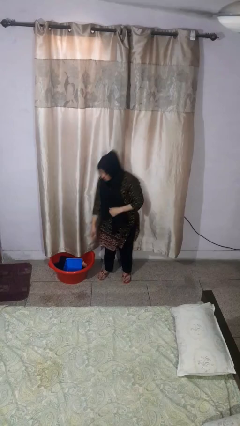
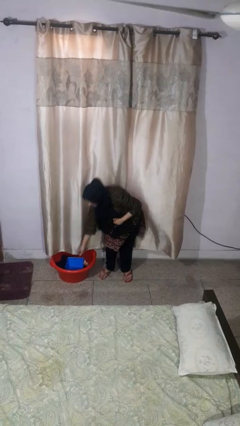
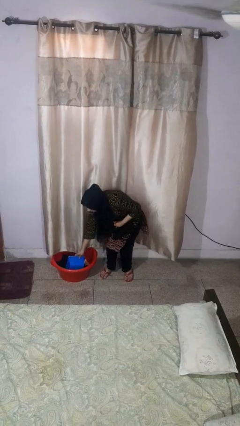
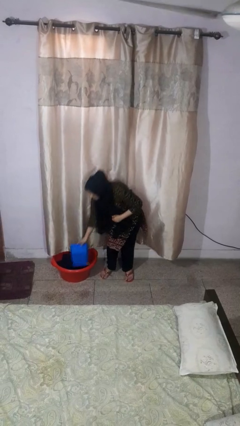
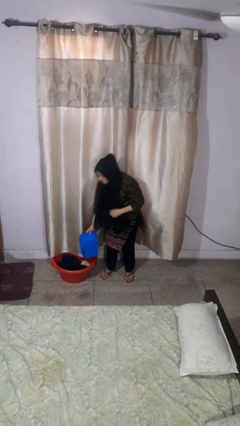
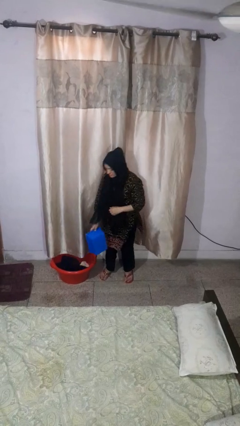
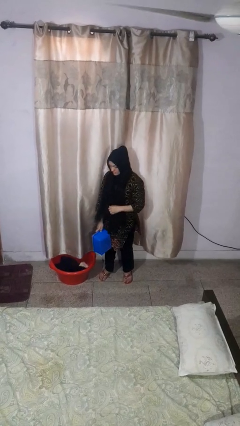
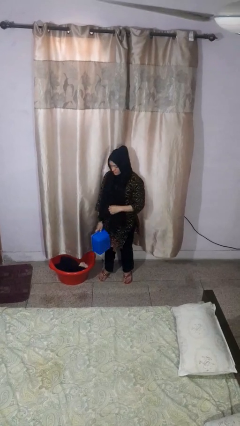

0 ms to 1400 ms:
person takes object from basket

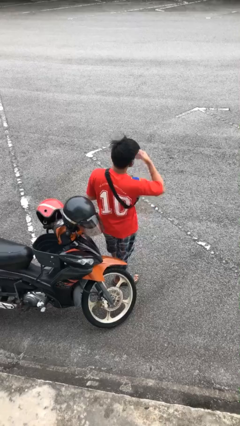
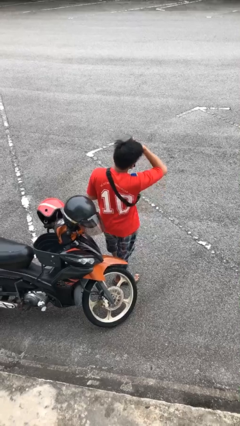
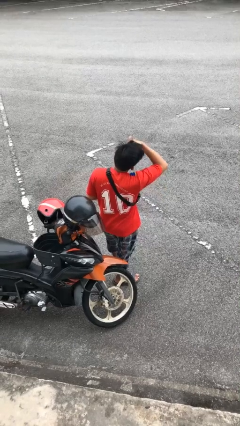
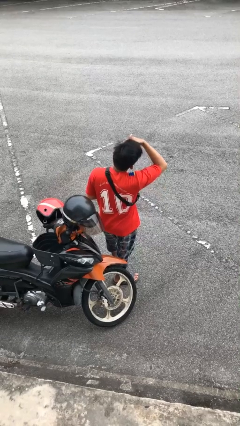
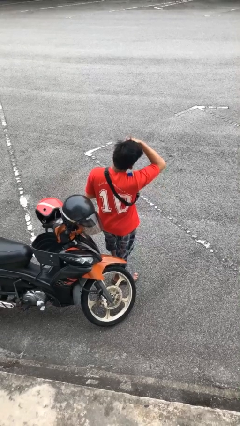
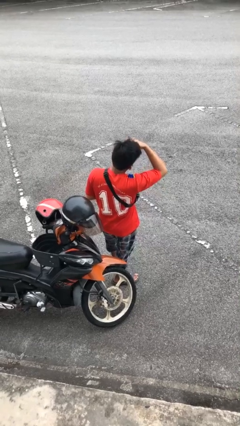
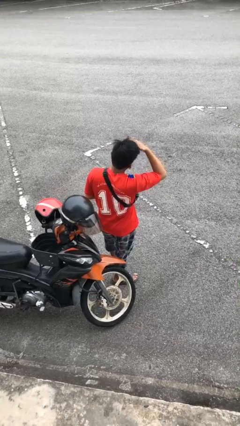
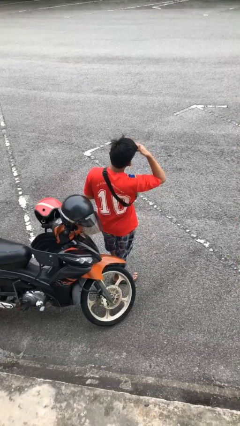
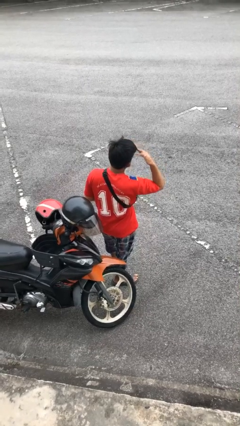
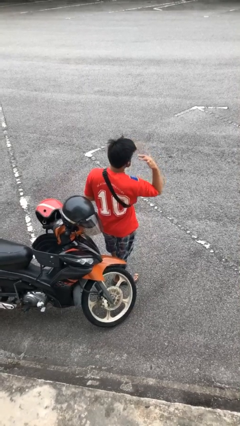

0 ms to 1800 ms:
person scratches face

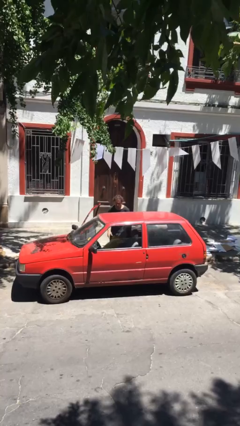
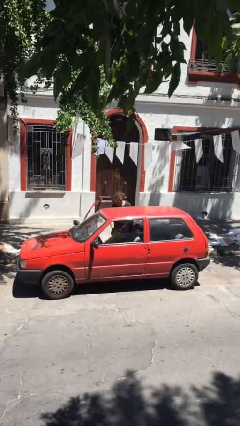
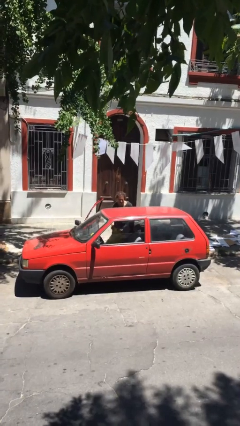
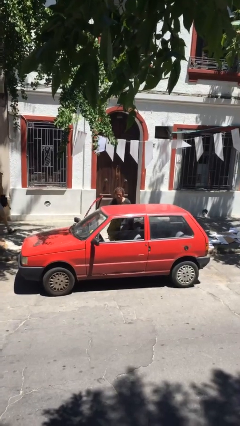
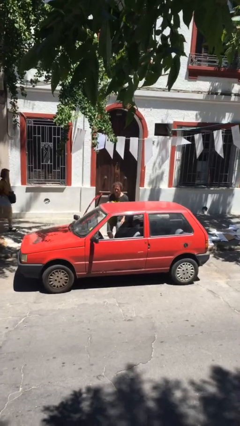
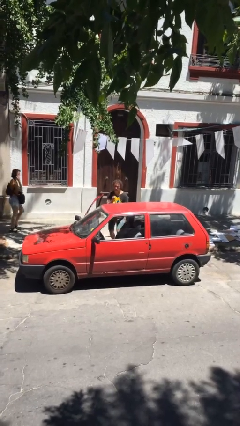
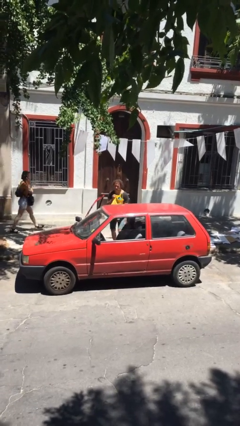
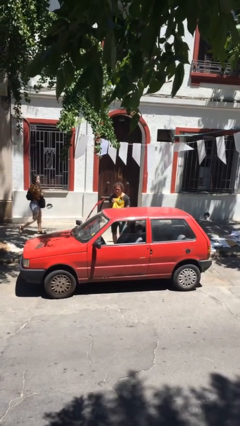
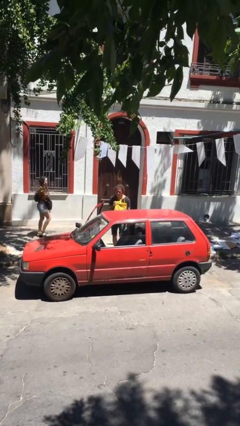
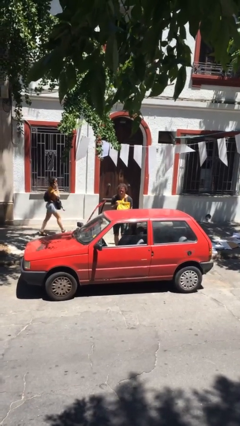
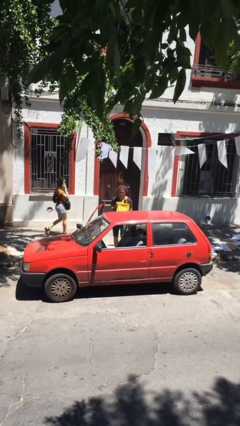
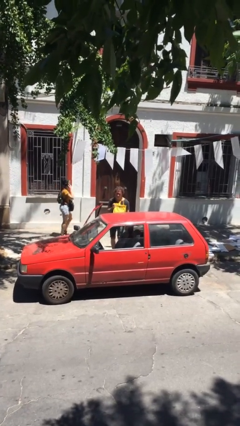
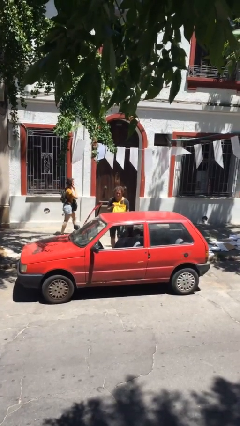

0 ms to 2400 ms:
person unloads car

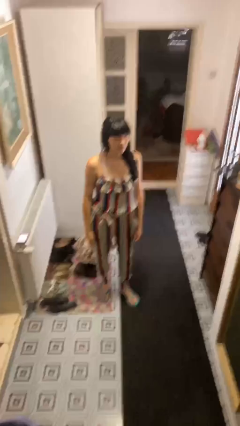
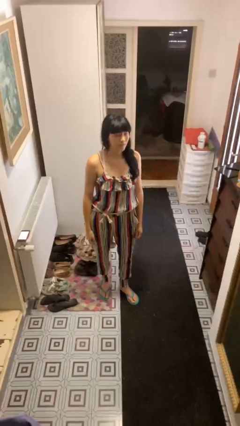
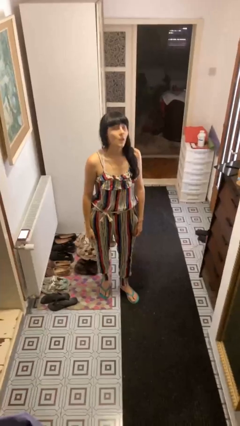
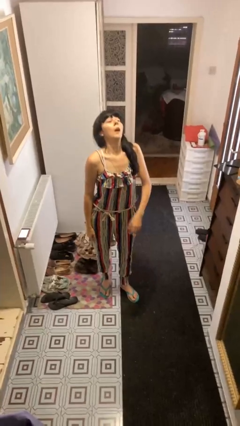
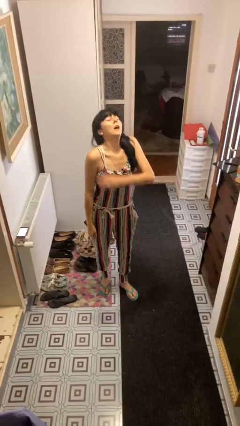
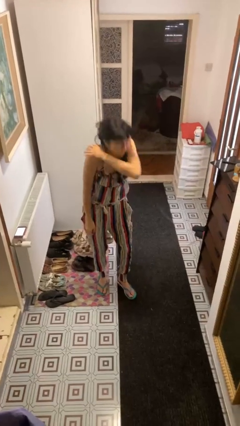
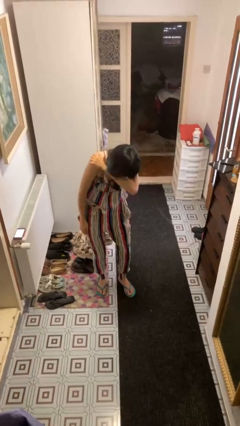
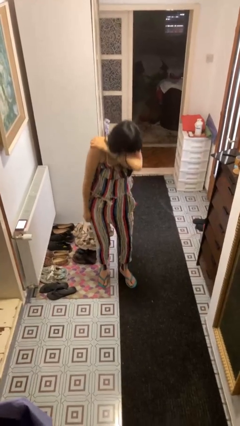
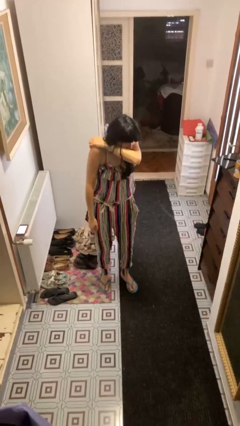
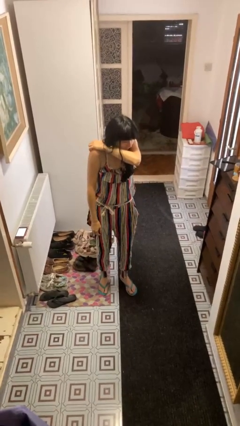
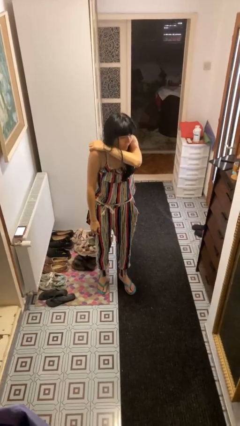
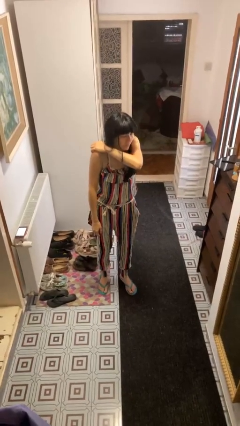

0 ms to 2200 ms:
person sneezes into arm

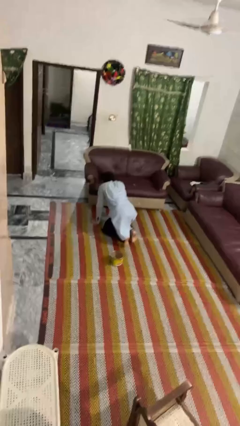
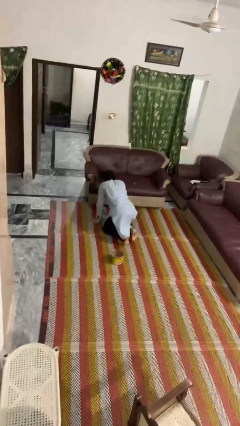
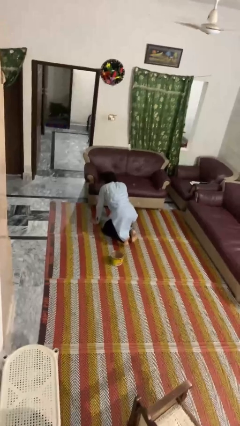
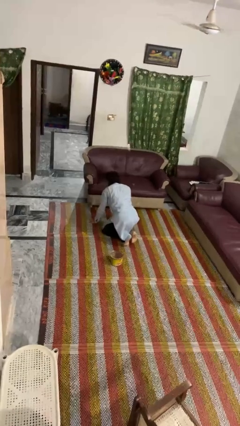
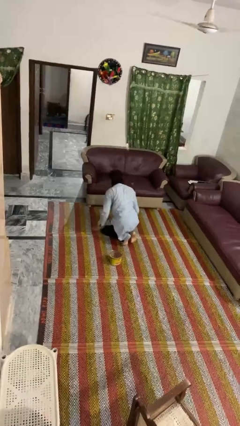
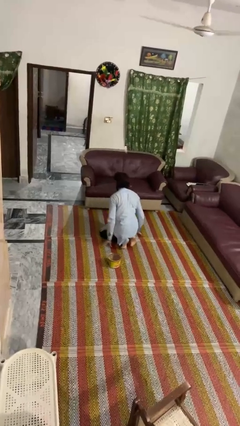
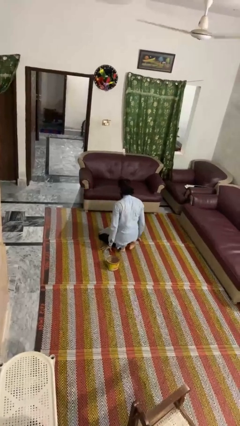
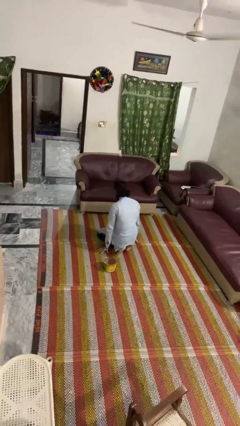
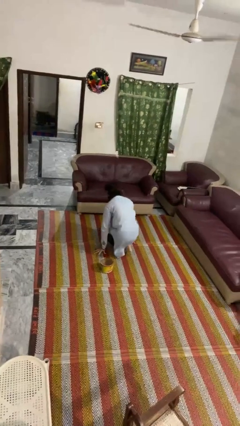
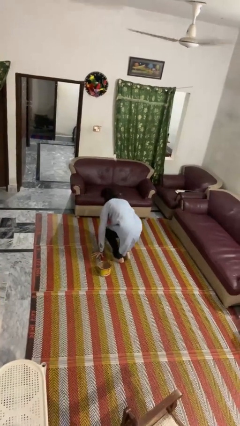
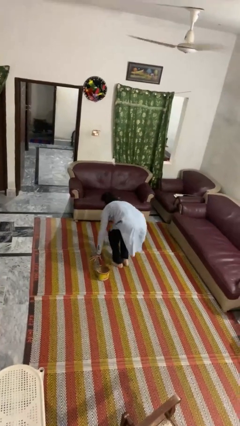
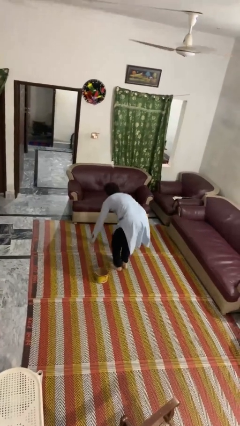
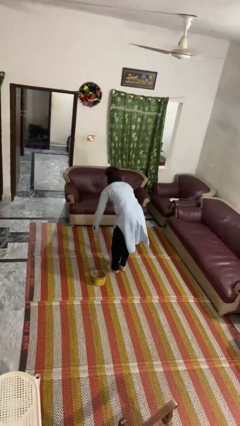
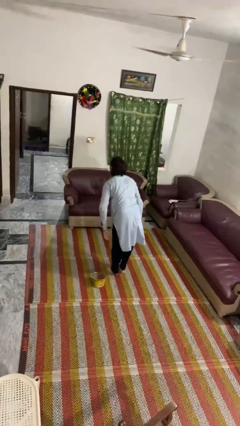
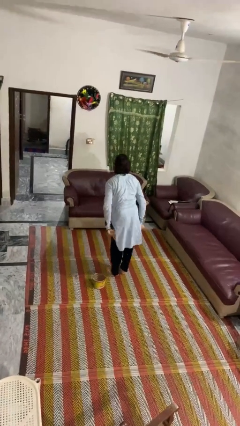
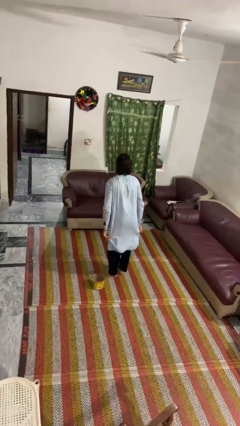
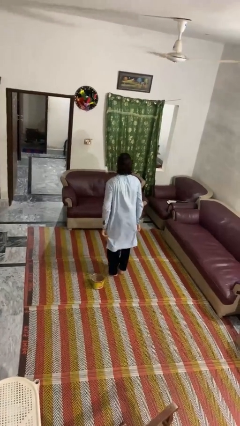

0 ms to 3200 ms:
person stands up from floor

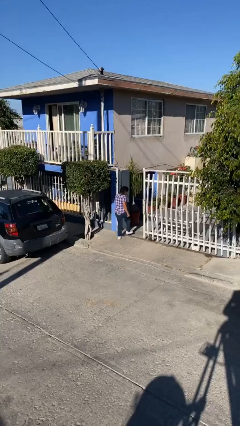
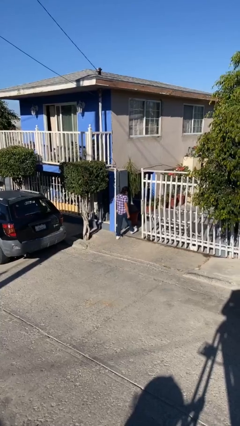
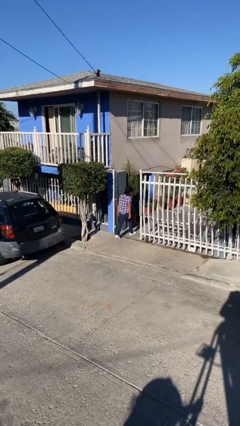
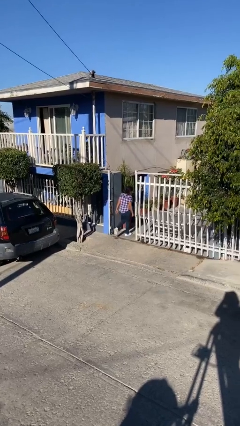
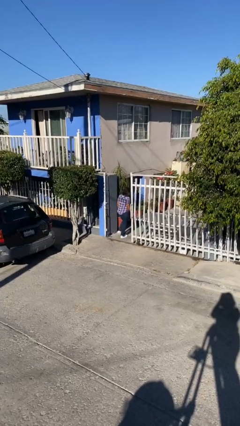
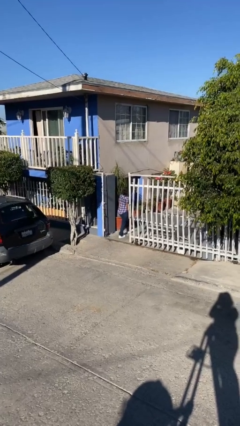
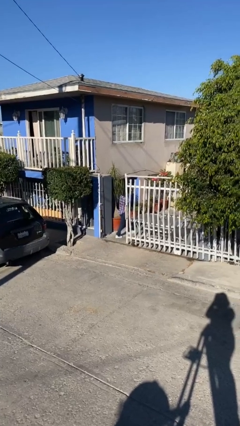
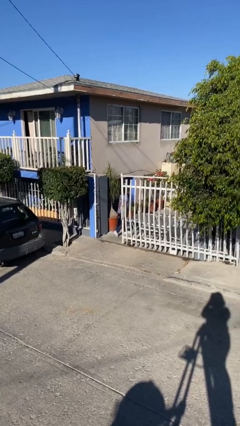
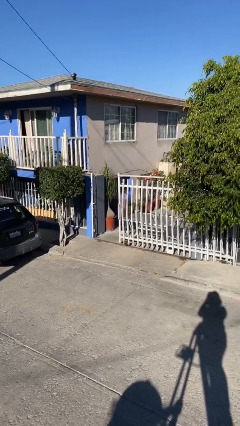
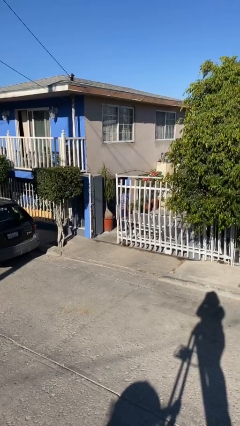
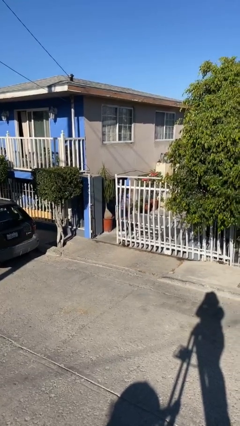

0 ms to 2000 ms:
person exits scene through structure

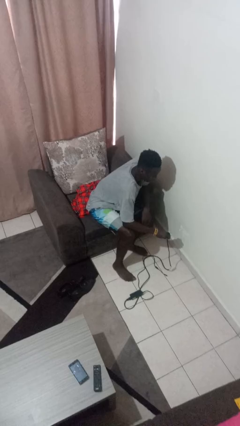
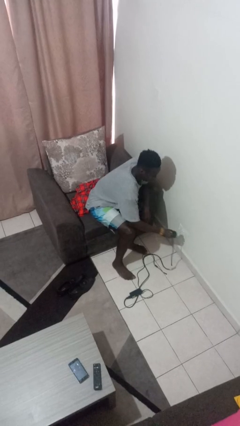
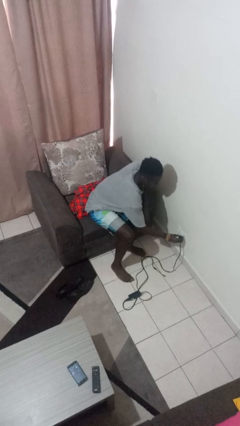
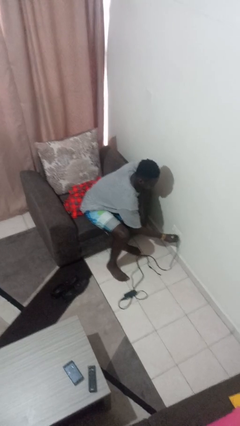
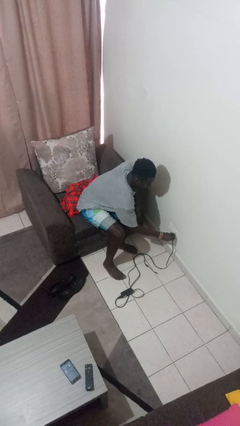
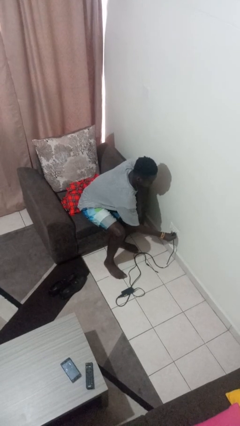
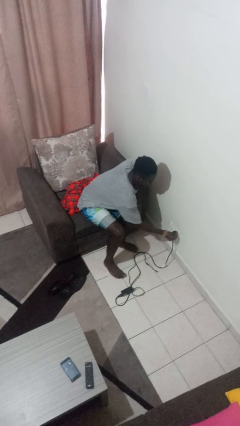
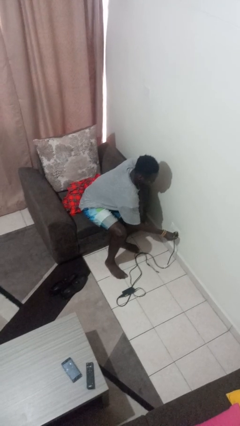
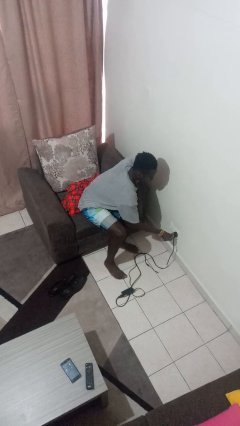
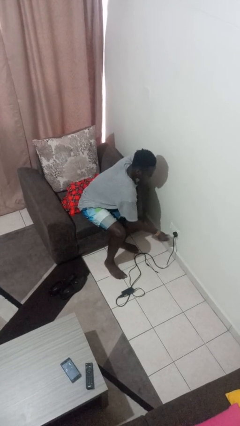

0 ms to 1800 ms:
person plugs into electrical socket

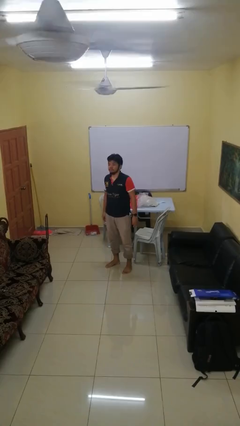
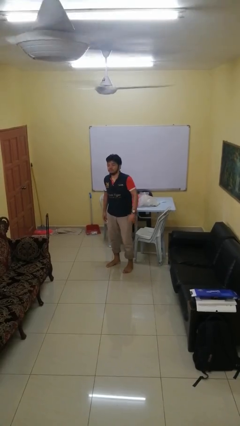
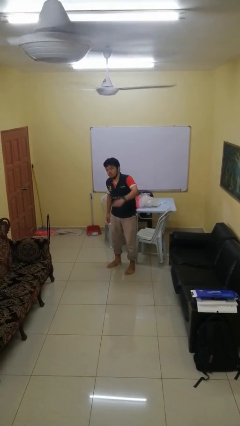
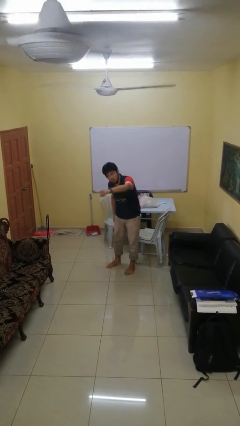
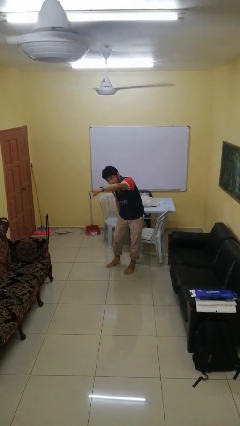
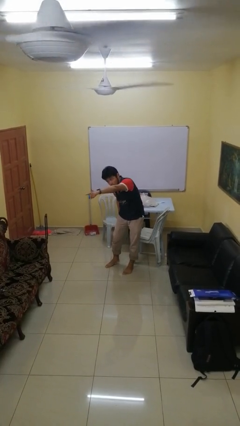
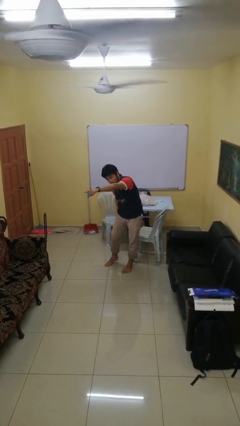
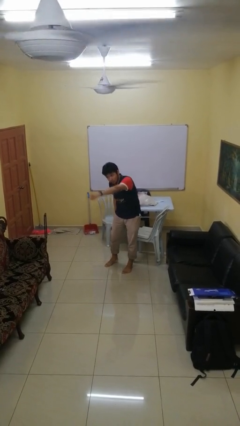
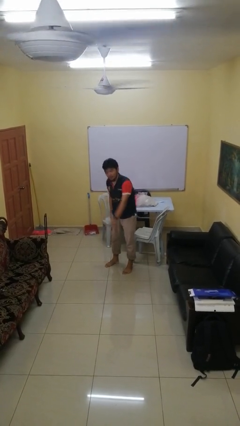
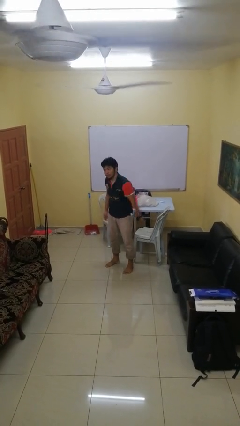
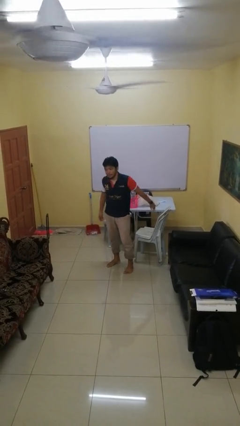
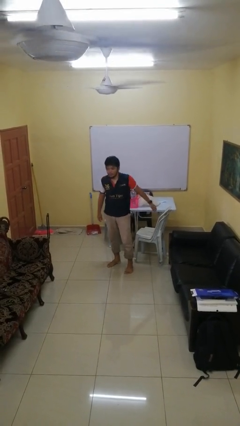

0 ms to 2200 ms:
person points at person
